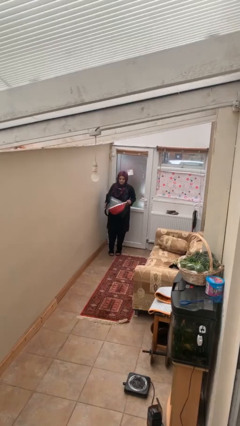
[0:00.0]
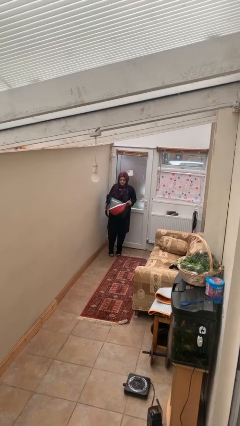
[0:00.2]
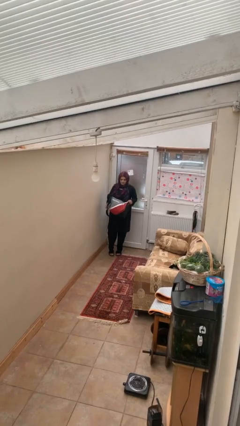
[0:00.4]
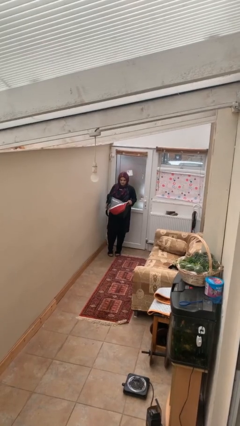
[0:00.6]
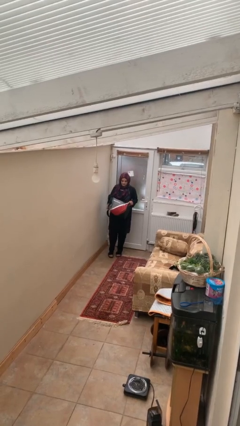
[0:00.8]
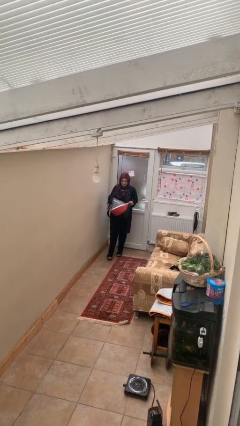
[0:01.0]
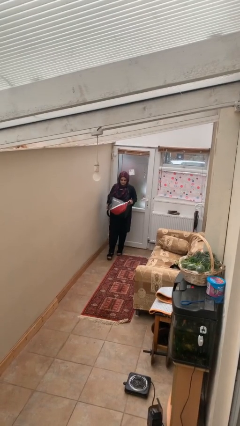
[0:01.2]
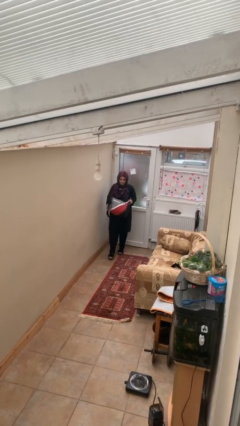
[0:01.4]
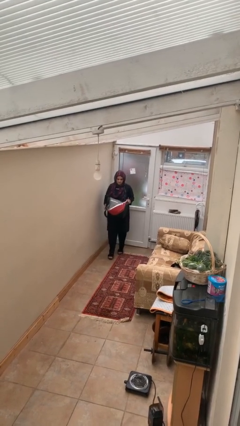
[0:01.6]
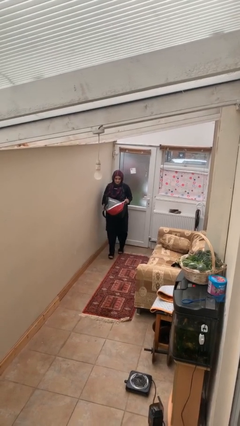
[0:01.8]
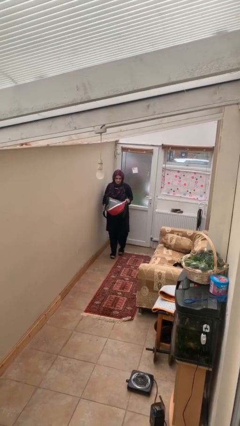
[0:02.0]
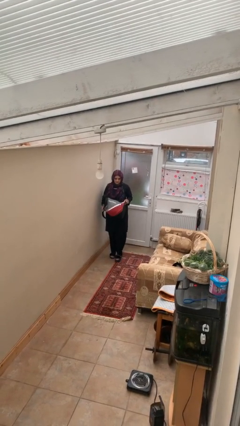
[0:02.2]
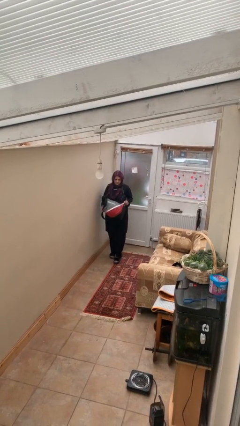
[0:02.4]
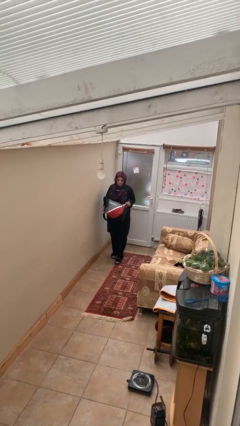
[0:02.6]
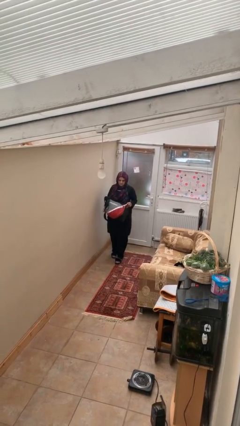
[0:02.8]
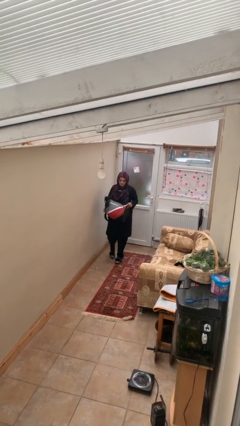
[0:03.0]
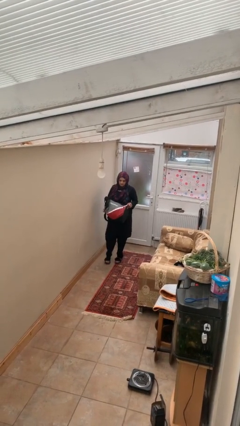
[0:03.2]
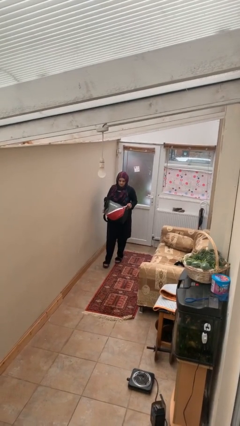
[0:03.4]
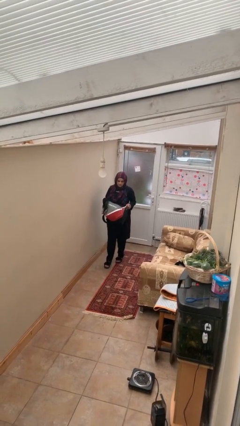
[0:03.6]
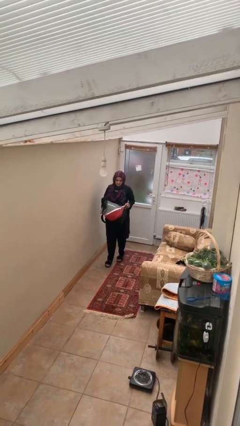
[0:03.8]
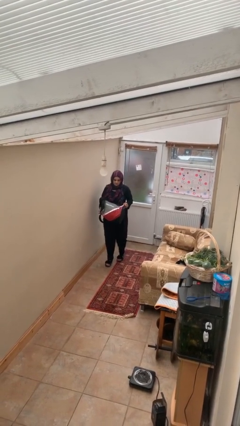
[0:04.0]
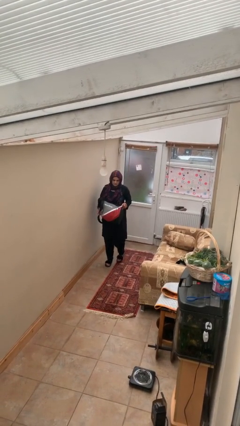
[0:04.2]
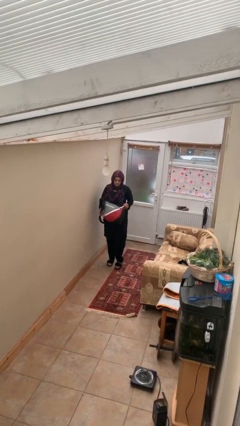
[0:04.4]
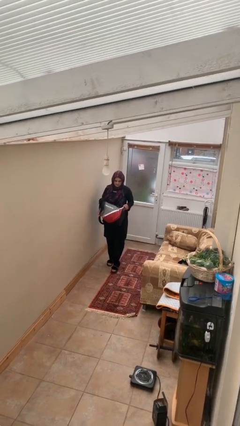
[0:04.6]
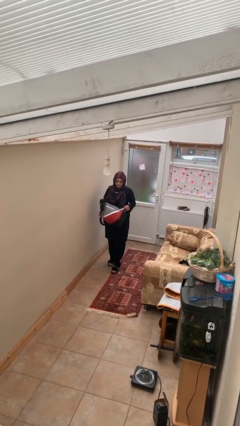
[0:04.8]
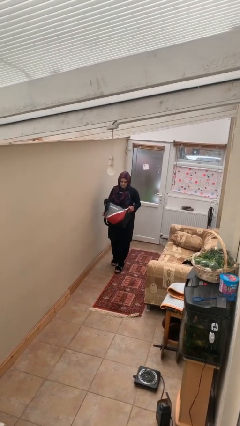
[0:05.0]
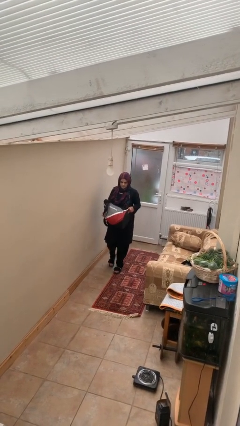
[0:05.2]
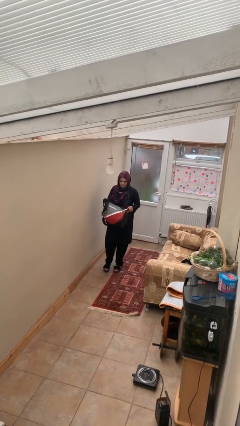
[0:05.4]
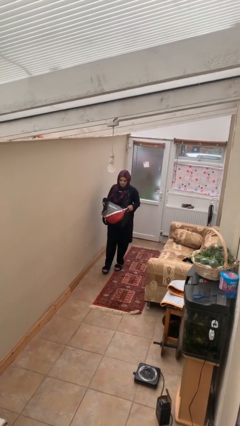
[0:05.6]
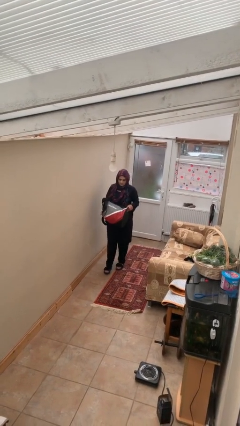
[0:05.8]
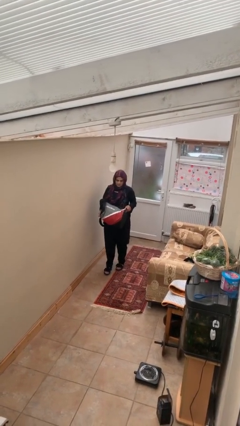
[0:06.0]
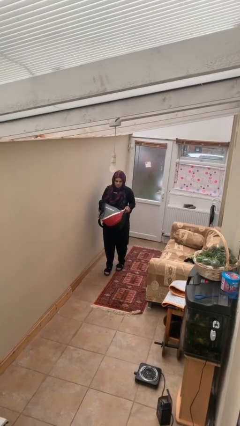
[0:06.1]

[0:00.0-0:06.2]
person carries heavy object

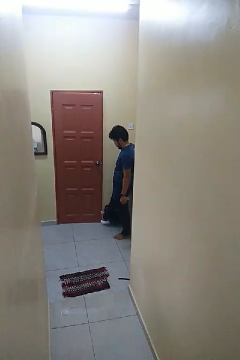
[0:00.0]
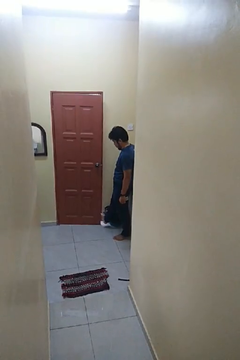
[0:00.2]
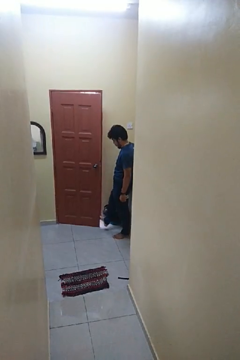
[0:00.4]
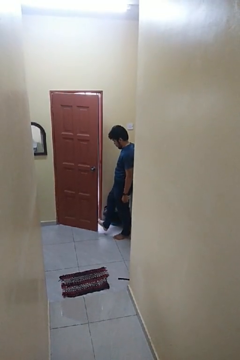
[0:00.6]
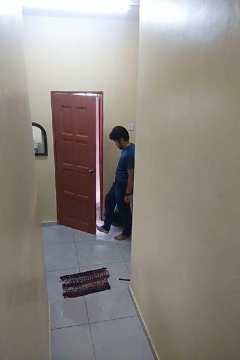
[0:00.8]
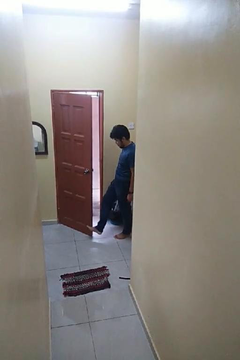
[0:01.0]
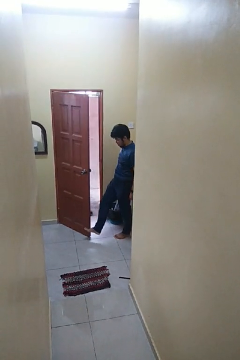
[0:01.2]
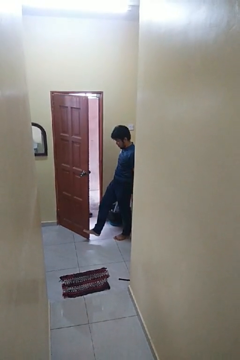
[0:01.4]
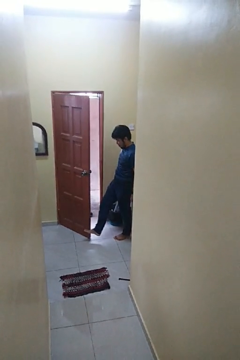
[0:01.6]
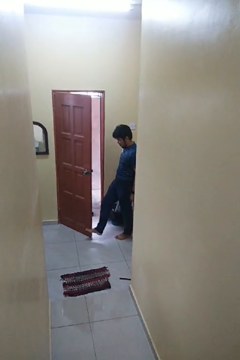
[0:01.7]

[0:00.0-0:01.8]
person opens facility door

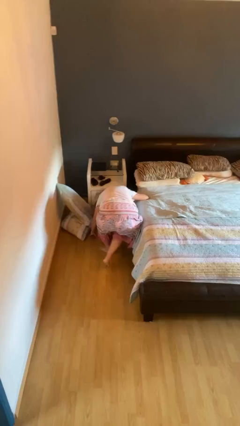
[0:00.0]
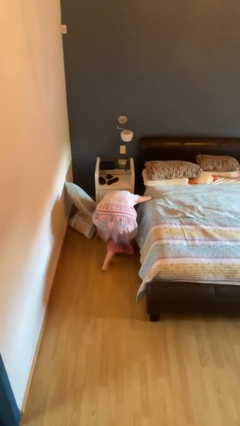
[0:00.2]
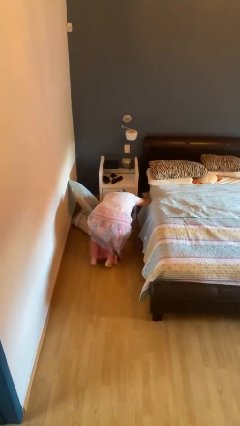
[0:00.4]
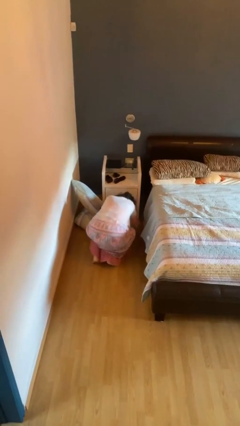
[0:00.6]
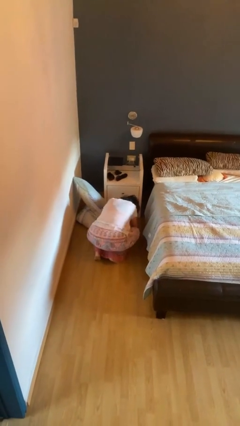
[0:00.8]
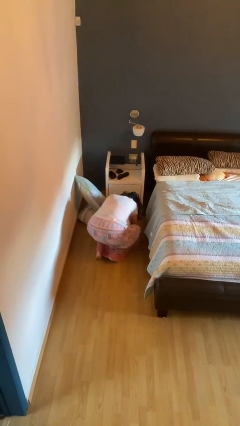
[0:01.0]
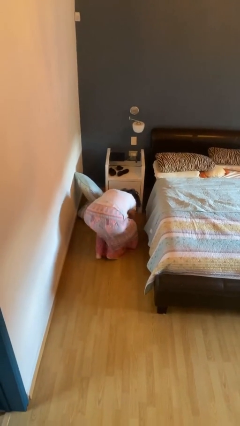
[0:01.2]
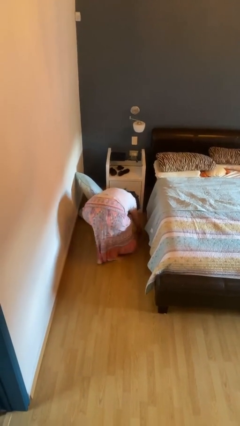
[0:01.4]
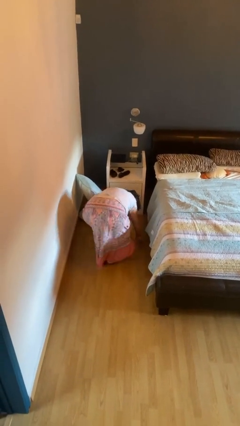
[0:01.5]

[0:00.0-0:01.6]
person falls from bed

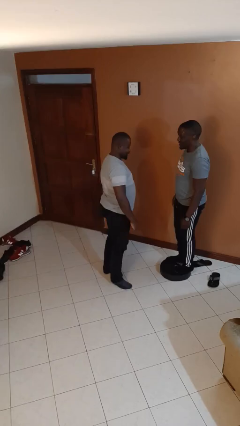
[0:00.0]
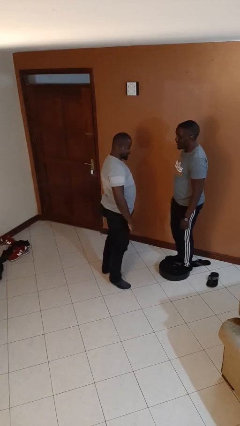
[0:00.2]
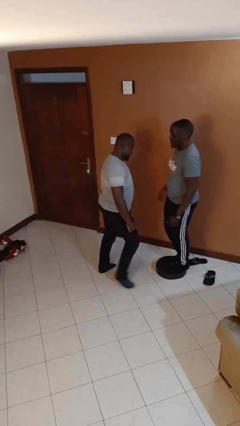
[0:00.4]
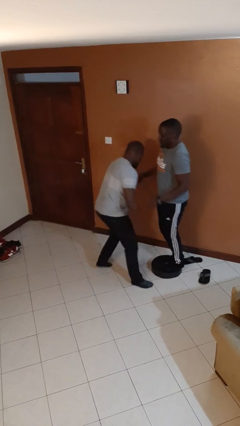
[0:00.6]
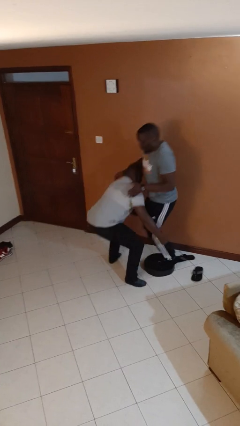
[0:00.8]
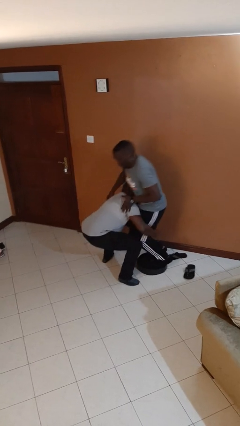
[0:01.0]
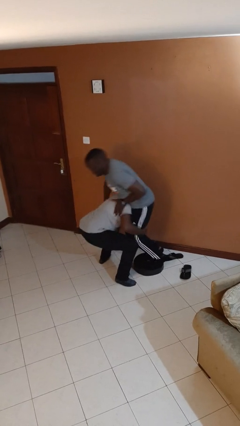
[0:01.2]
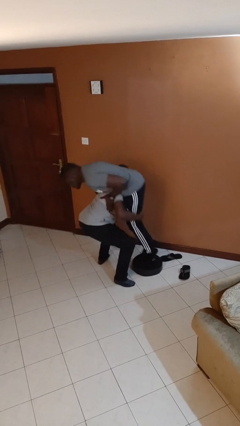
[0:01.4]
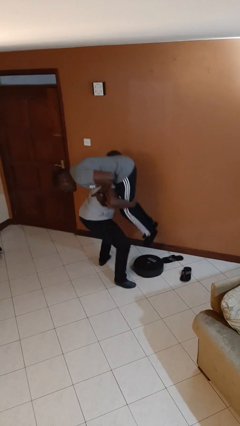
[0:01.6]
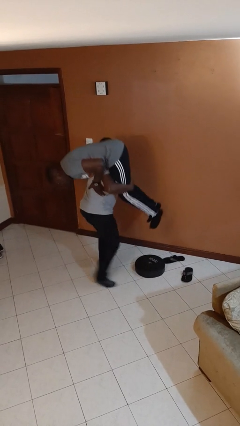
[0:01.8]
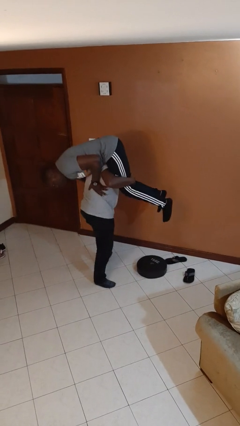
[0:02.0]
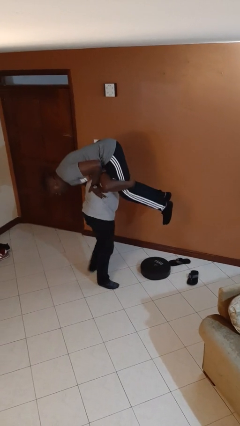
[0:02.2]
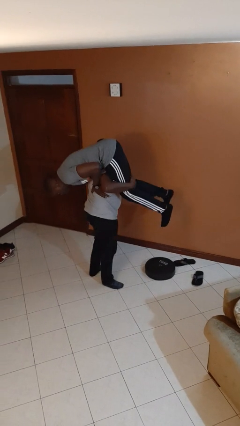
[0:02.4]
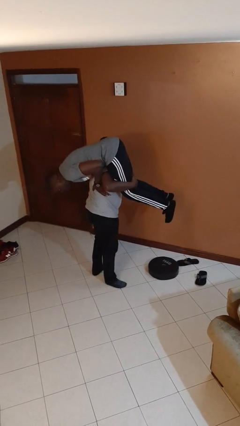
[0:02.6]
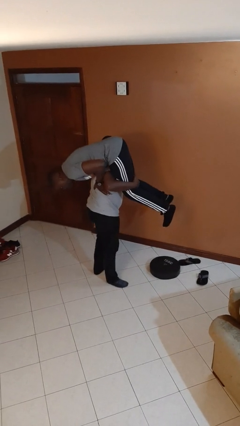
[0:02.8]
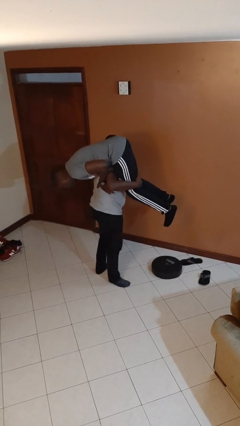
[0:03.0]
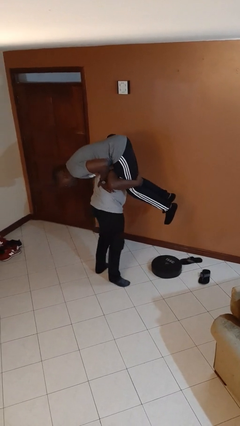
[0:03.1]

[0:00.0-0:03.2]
person carries person over shoulder

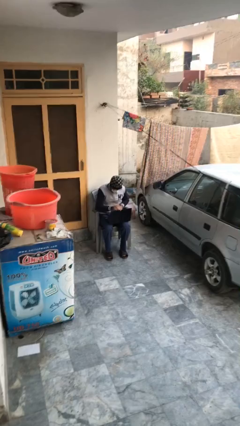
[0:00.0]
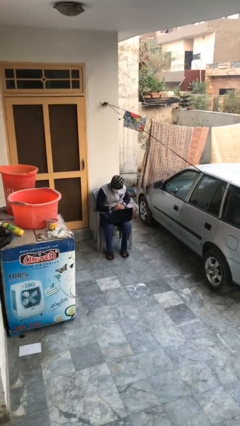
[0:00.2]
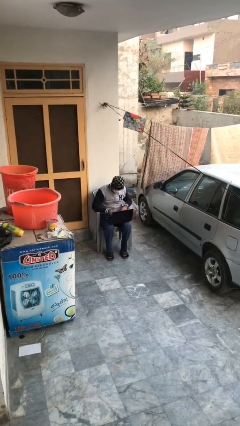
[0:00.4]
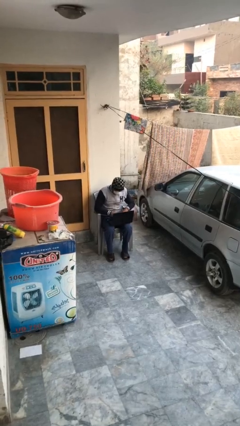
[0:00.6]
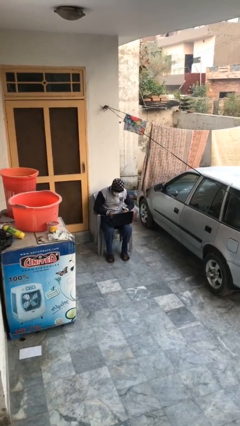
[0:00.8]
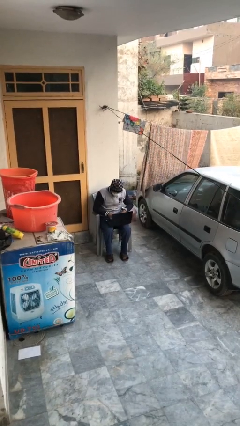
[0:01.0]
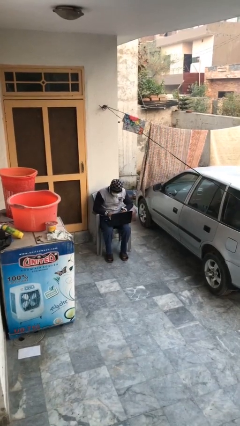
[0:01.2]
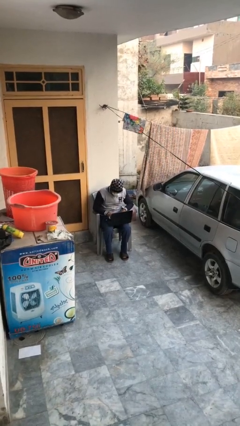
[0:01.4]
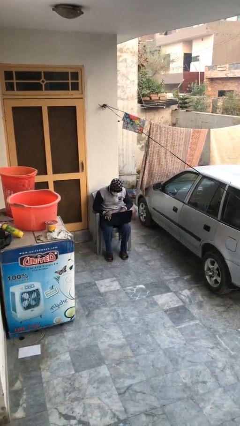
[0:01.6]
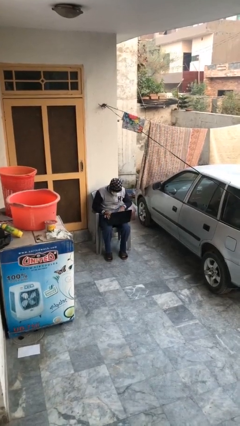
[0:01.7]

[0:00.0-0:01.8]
person interacts with laptop

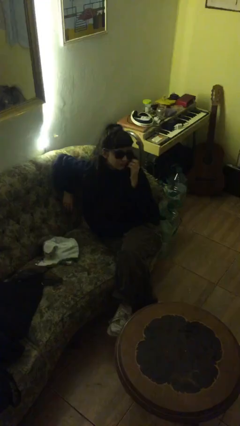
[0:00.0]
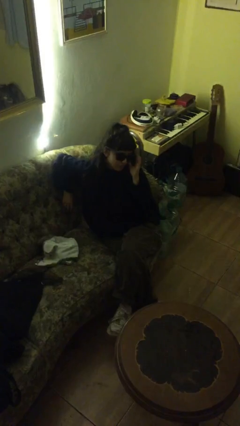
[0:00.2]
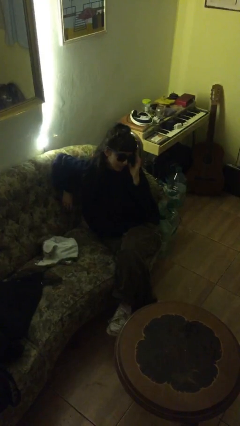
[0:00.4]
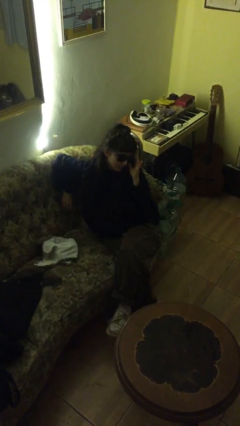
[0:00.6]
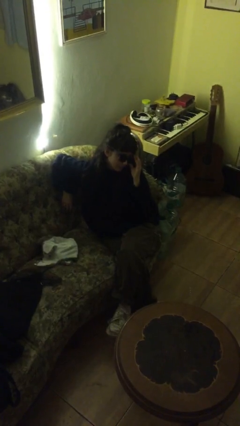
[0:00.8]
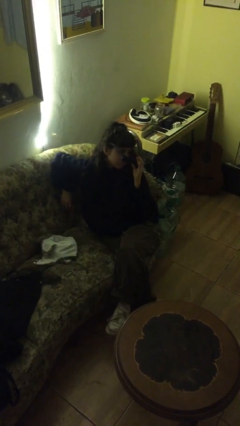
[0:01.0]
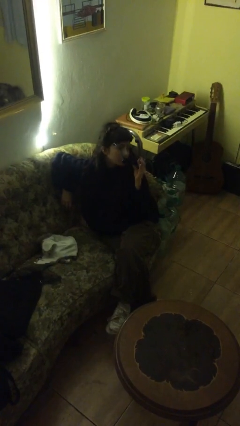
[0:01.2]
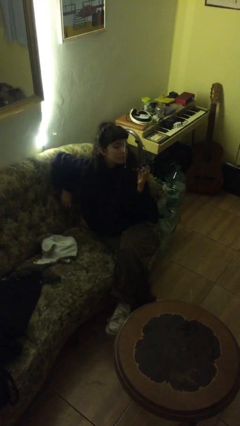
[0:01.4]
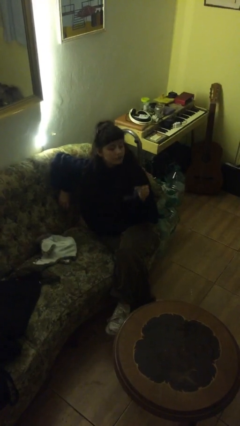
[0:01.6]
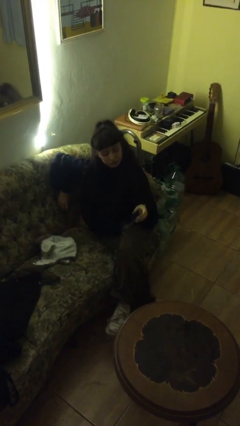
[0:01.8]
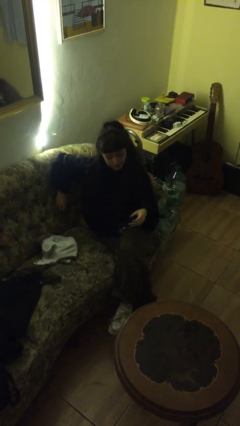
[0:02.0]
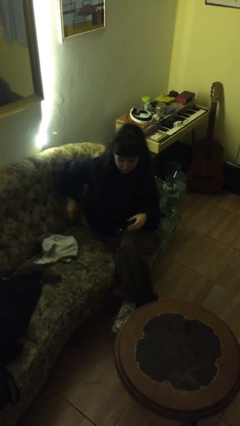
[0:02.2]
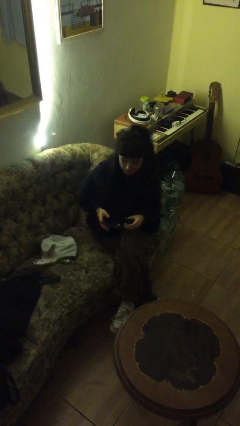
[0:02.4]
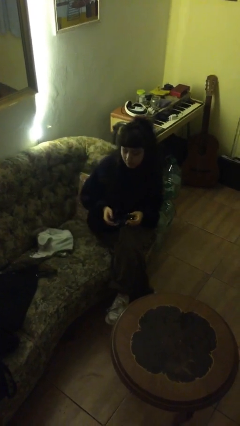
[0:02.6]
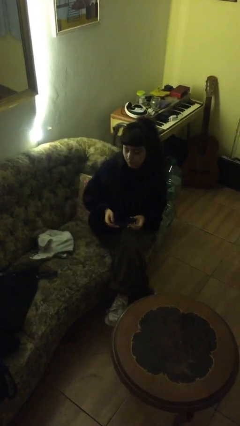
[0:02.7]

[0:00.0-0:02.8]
person takes off sunglasses

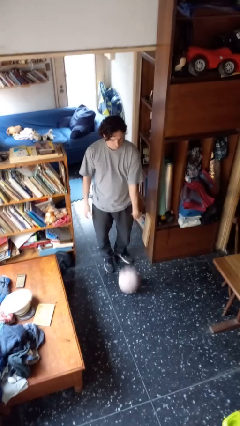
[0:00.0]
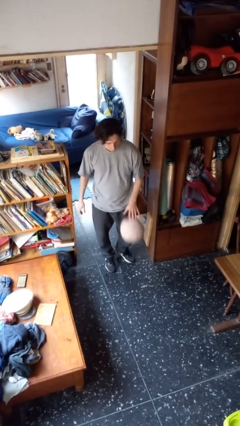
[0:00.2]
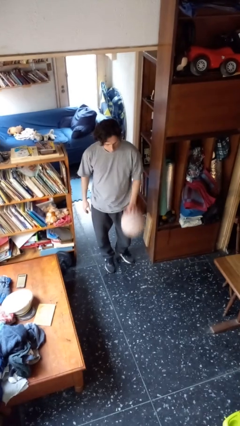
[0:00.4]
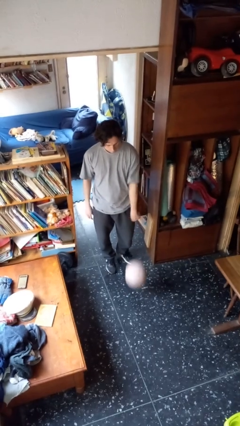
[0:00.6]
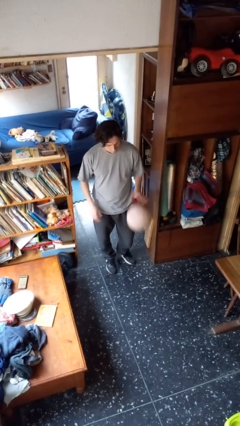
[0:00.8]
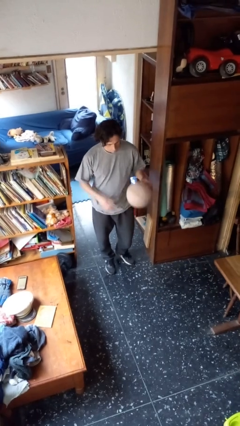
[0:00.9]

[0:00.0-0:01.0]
person bounces ball on floor
